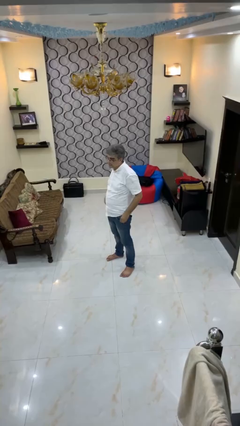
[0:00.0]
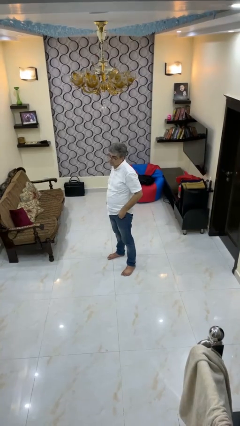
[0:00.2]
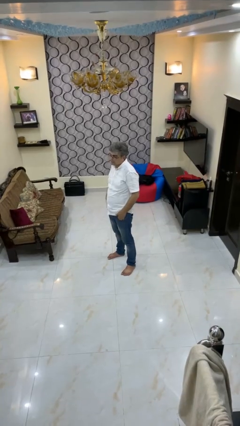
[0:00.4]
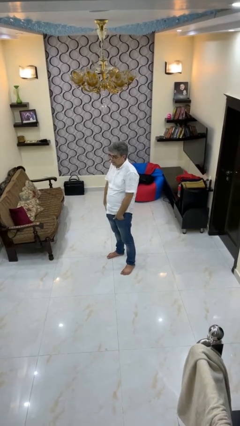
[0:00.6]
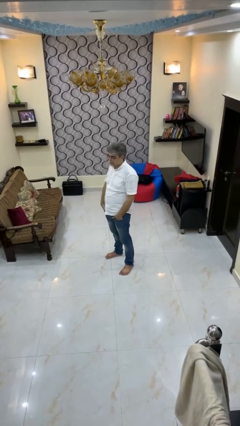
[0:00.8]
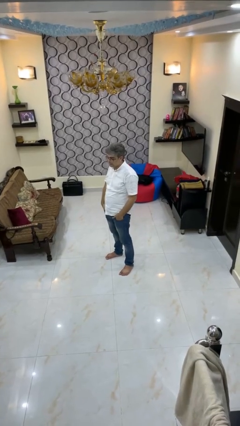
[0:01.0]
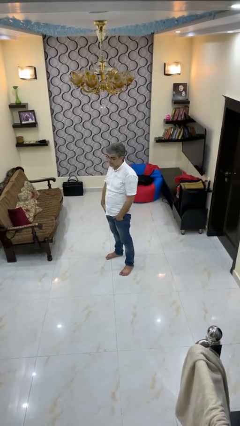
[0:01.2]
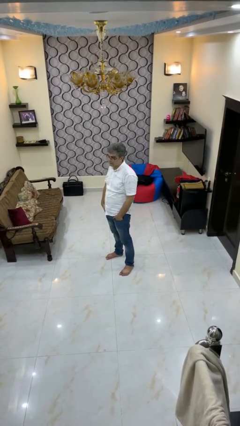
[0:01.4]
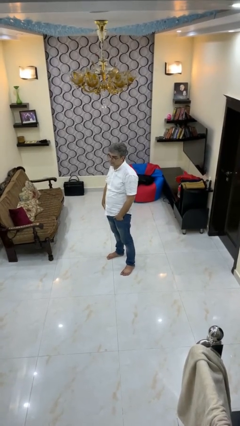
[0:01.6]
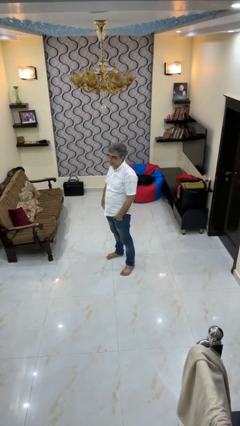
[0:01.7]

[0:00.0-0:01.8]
person puts hands in back pockets

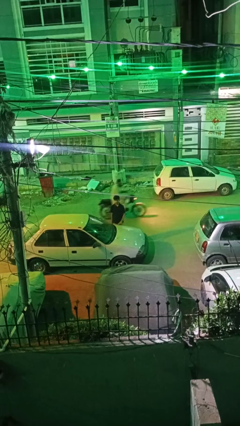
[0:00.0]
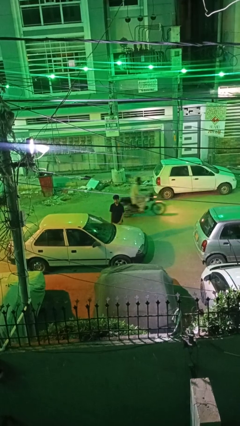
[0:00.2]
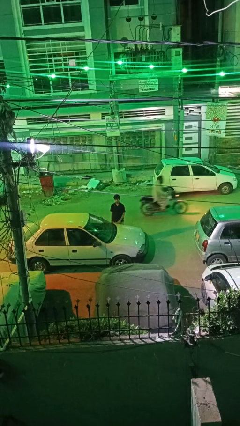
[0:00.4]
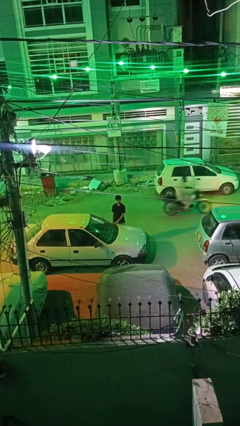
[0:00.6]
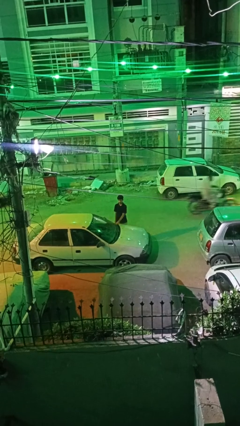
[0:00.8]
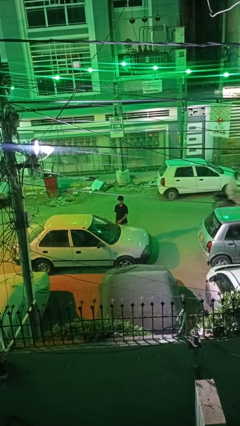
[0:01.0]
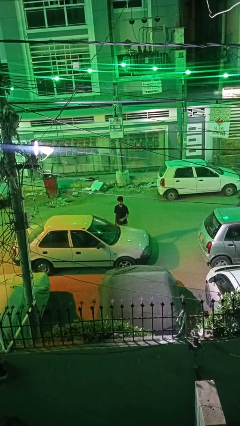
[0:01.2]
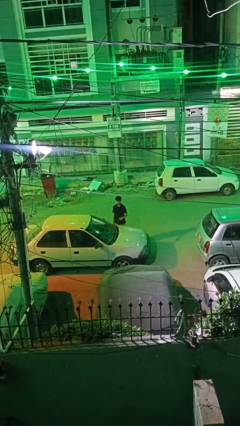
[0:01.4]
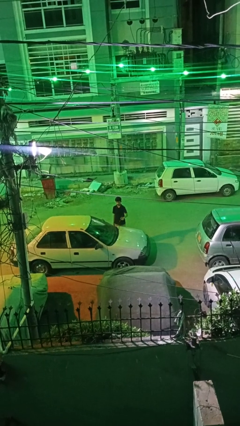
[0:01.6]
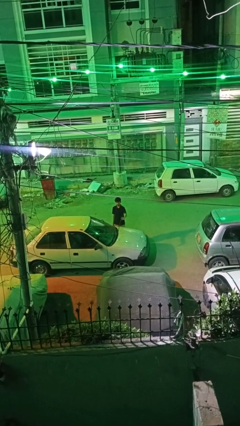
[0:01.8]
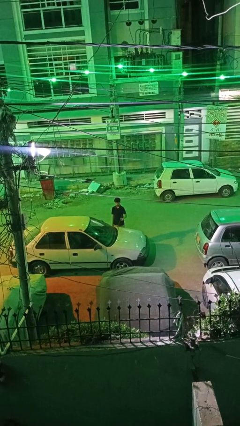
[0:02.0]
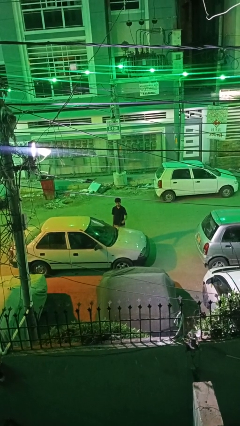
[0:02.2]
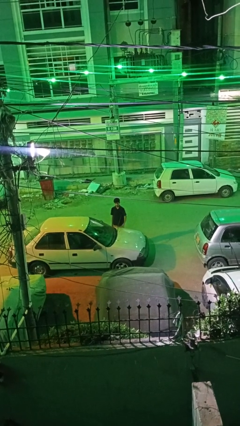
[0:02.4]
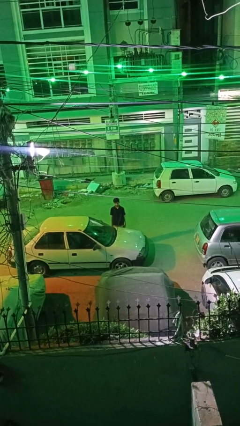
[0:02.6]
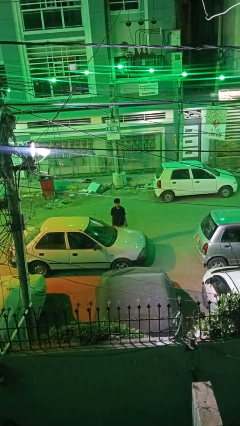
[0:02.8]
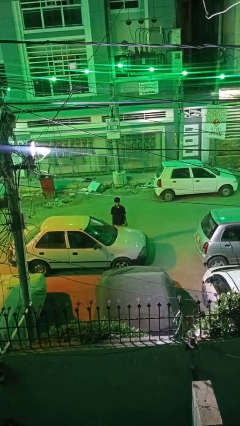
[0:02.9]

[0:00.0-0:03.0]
person flips up car wipers

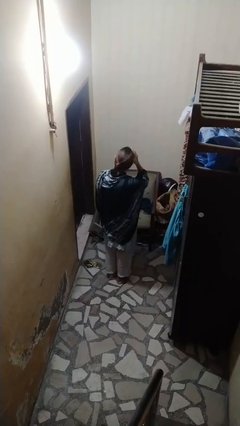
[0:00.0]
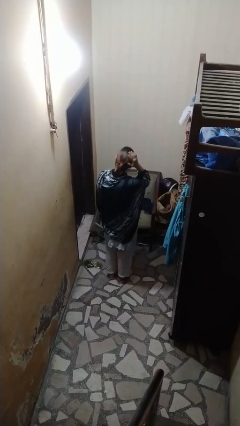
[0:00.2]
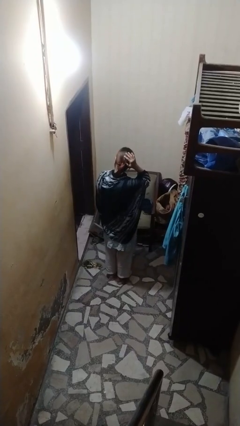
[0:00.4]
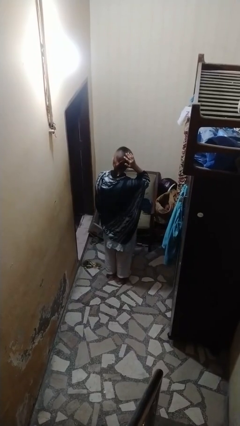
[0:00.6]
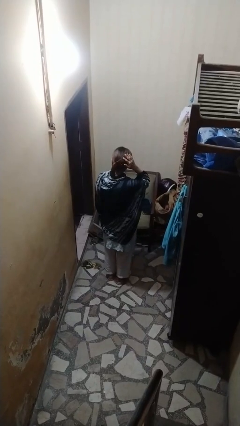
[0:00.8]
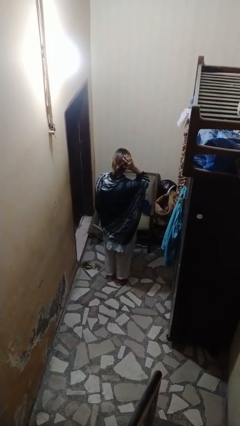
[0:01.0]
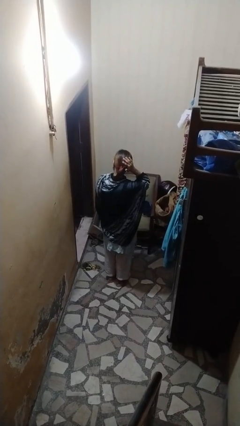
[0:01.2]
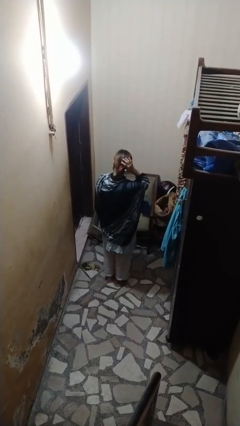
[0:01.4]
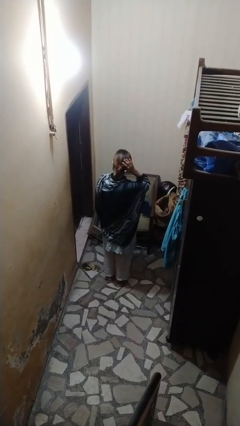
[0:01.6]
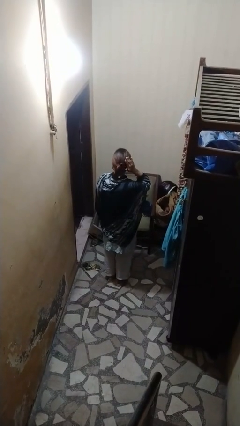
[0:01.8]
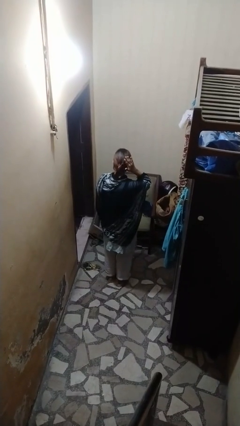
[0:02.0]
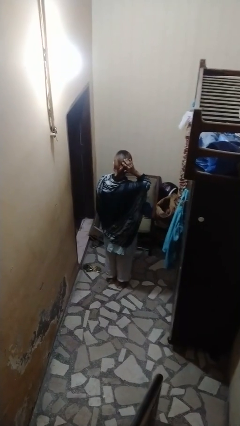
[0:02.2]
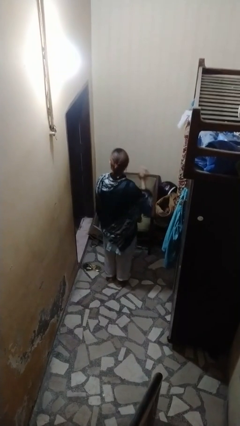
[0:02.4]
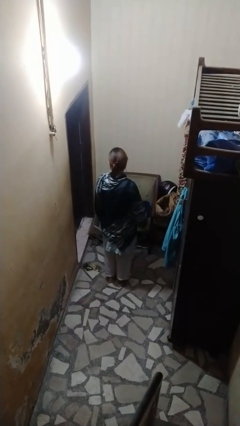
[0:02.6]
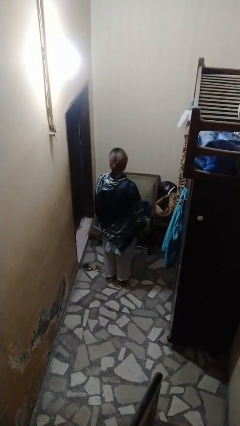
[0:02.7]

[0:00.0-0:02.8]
person strokes hair

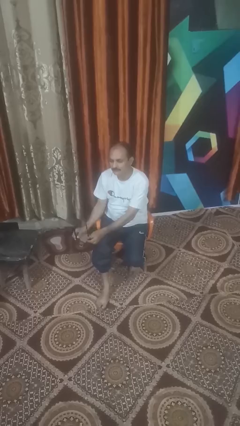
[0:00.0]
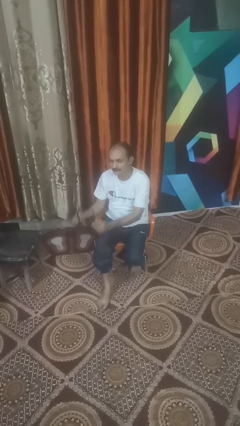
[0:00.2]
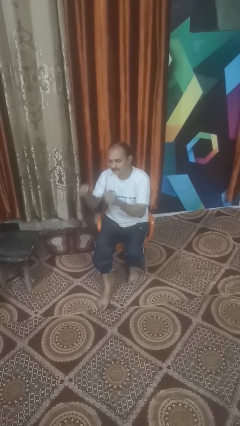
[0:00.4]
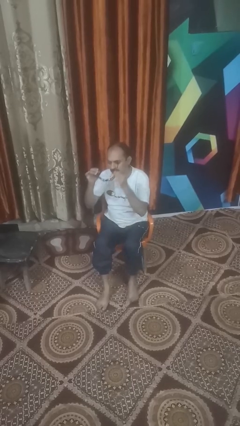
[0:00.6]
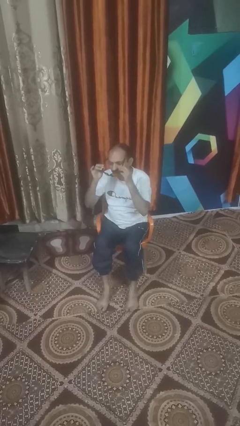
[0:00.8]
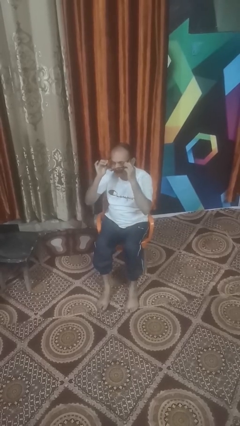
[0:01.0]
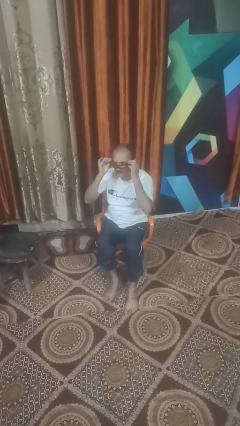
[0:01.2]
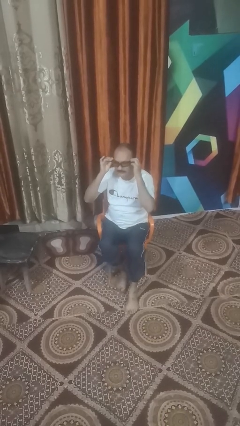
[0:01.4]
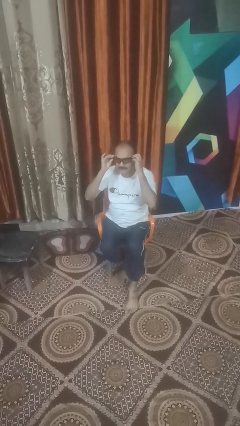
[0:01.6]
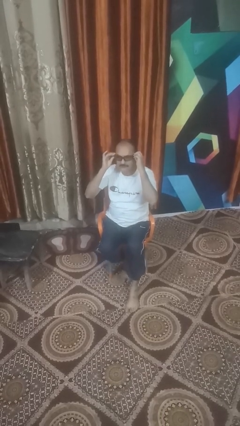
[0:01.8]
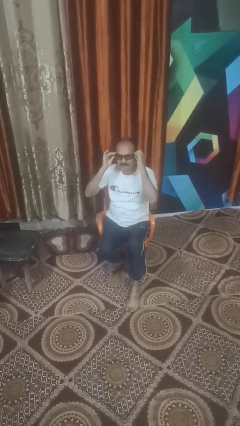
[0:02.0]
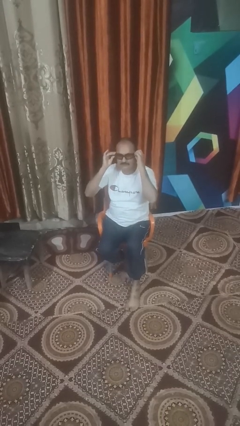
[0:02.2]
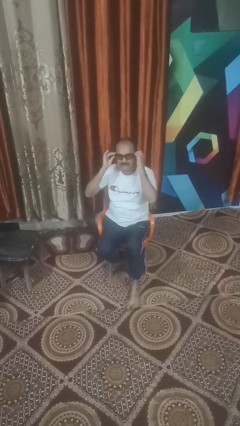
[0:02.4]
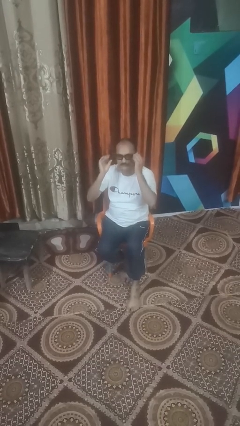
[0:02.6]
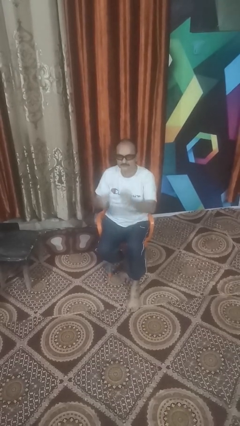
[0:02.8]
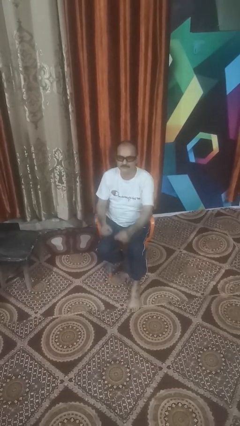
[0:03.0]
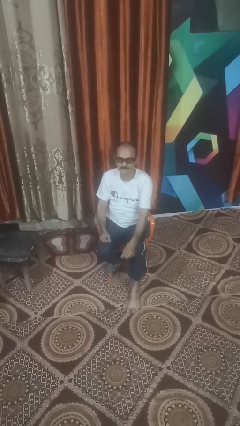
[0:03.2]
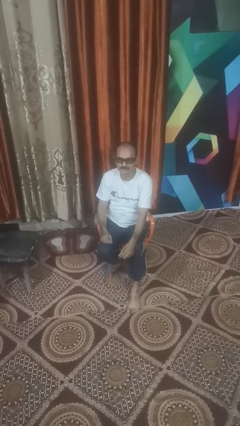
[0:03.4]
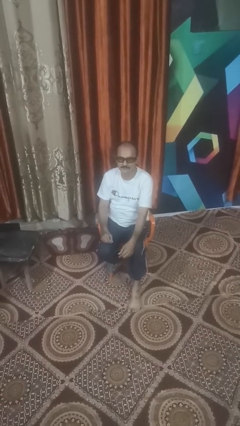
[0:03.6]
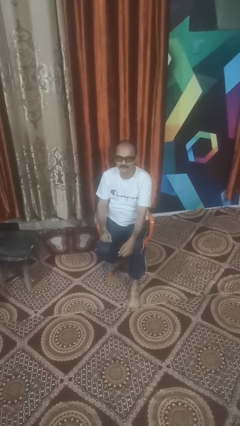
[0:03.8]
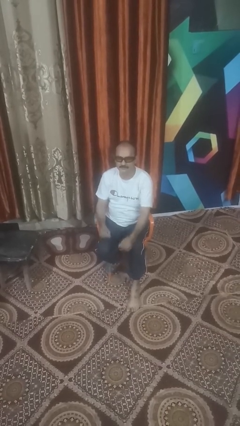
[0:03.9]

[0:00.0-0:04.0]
person puts on sunglasses

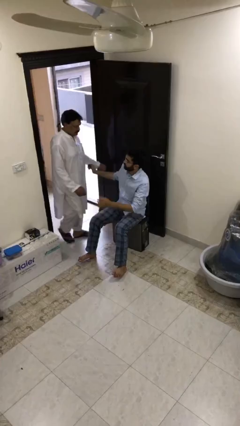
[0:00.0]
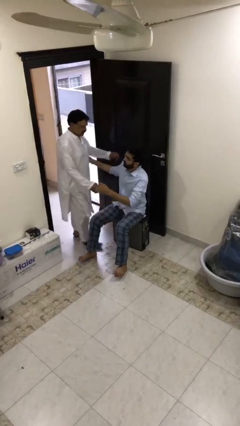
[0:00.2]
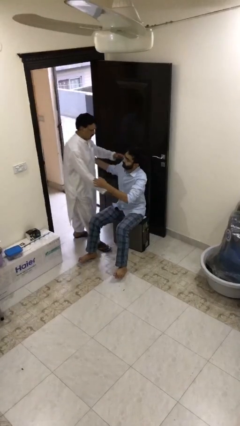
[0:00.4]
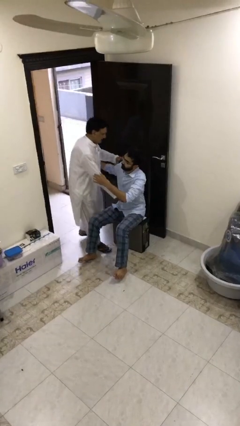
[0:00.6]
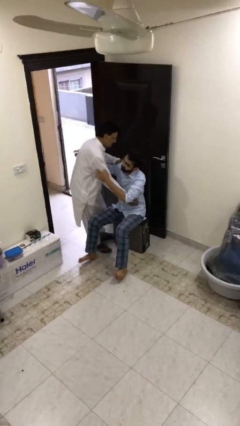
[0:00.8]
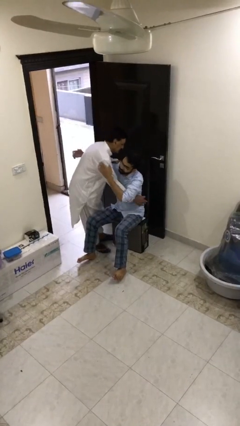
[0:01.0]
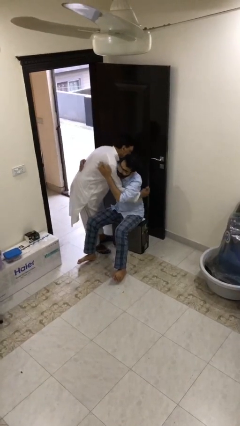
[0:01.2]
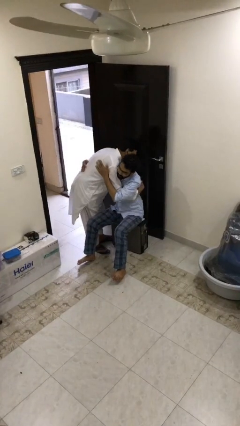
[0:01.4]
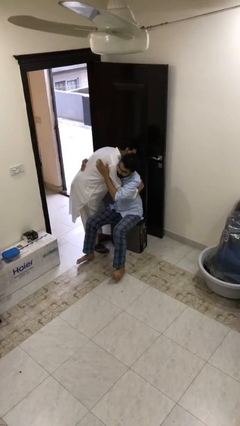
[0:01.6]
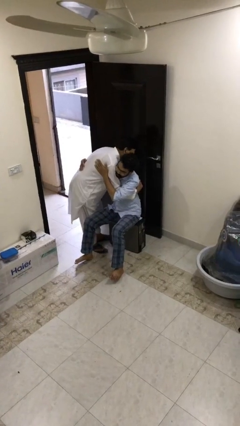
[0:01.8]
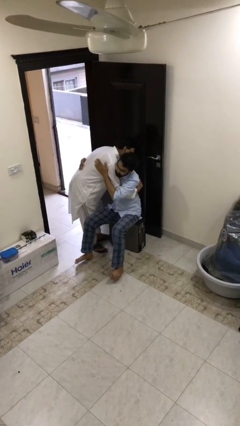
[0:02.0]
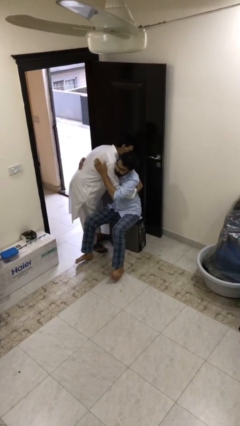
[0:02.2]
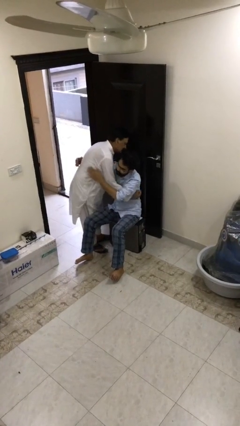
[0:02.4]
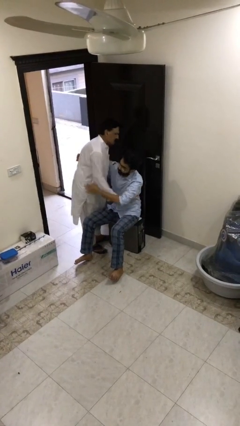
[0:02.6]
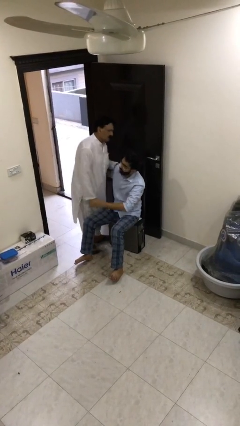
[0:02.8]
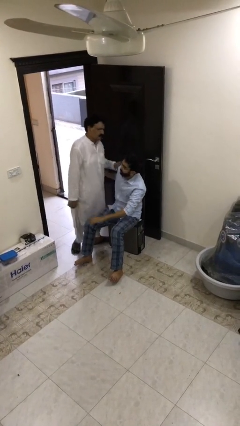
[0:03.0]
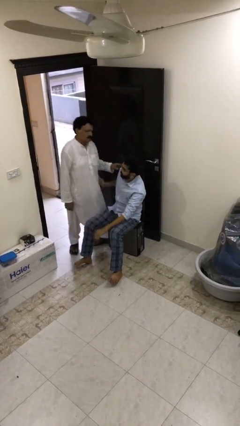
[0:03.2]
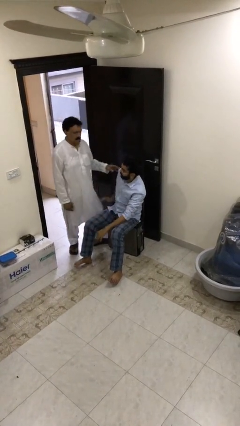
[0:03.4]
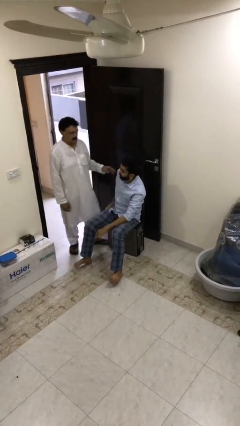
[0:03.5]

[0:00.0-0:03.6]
person embraces person

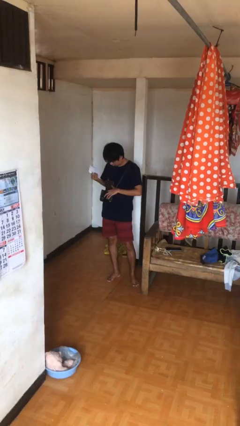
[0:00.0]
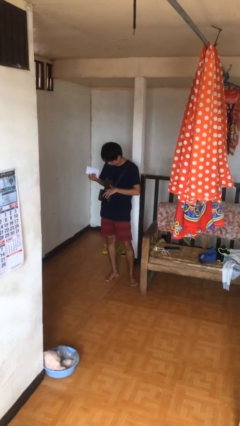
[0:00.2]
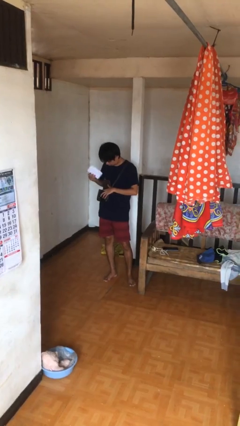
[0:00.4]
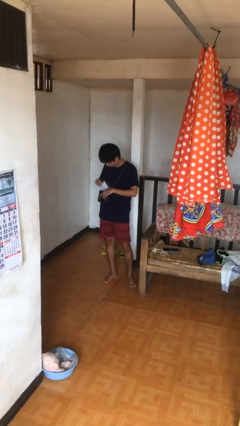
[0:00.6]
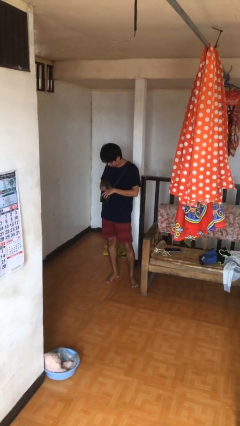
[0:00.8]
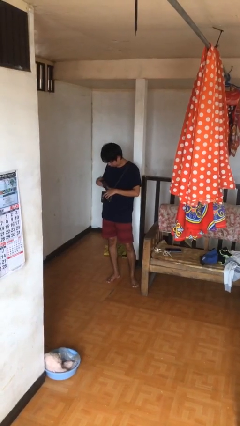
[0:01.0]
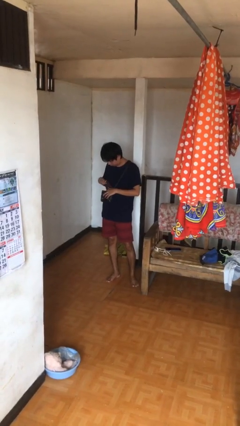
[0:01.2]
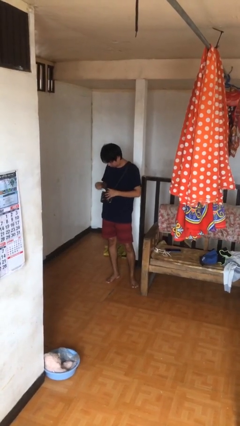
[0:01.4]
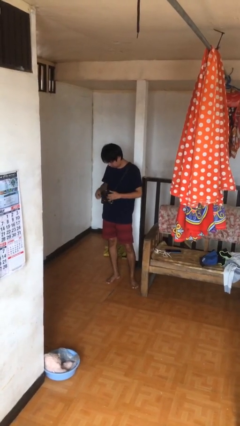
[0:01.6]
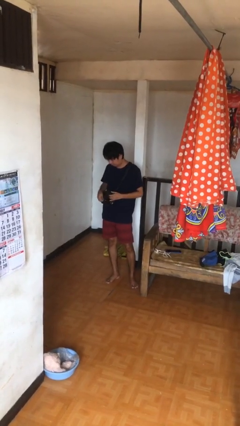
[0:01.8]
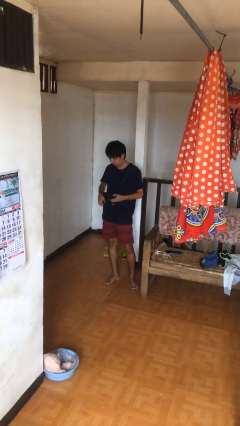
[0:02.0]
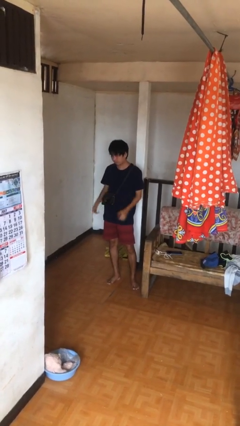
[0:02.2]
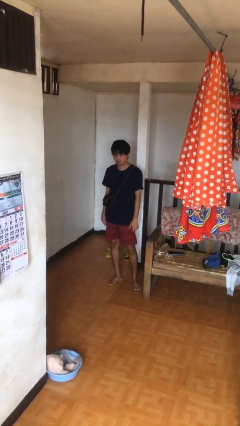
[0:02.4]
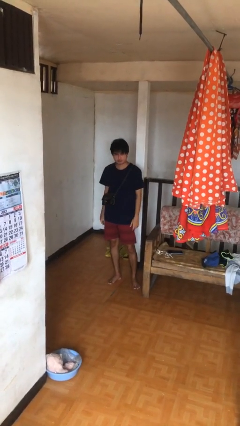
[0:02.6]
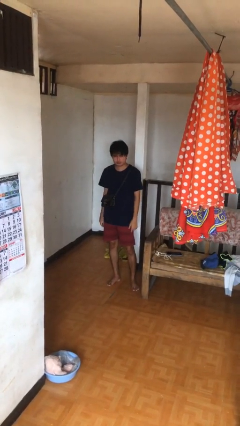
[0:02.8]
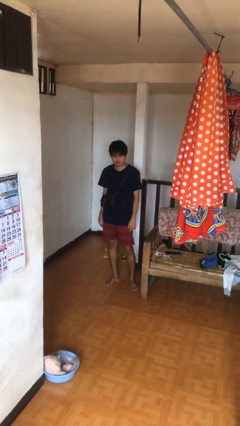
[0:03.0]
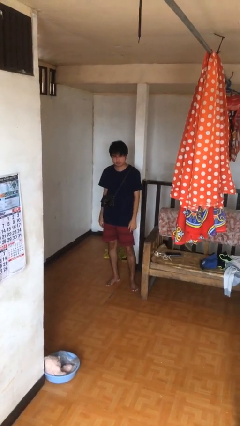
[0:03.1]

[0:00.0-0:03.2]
person puts object into purse
